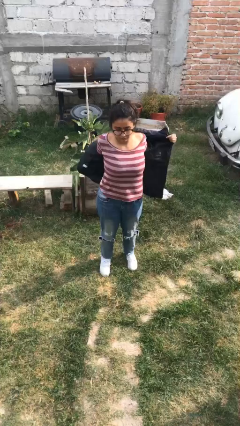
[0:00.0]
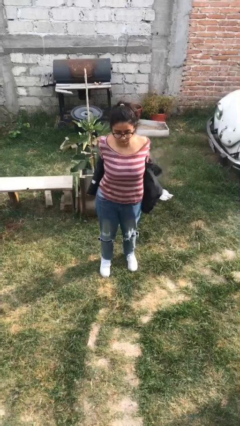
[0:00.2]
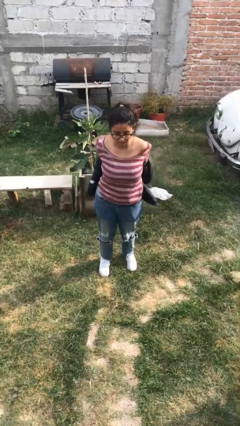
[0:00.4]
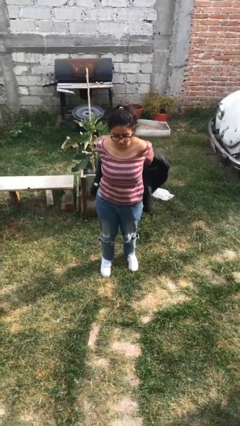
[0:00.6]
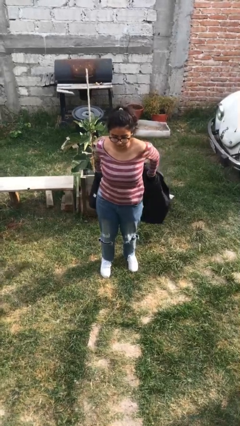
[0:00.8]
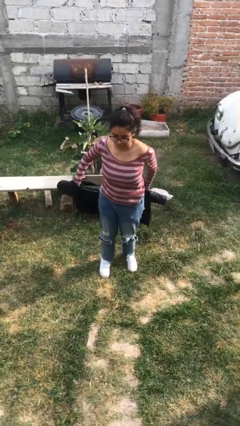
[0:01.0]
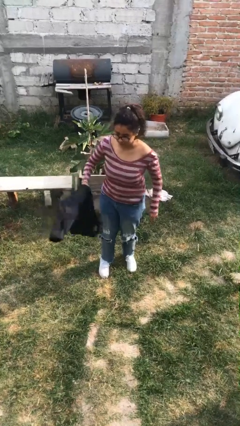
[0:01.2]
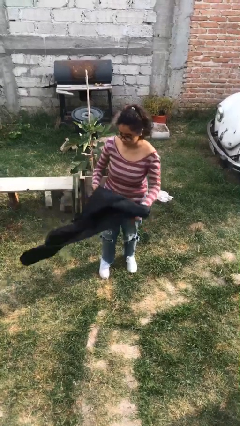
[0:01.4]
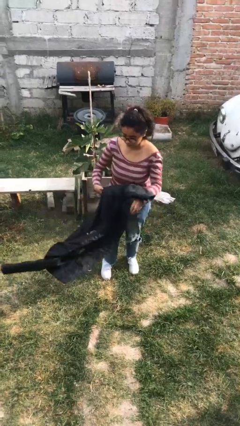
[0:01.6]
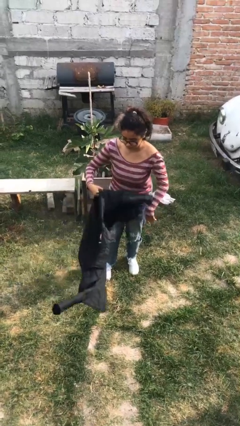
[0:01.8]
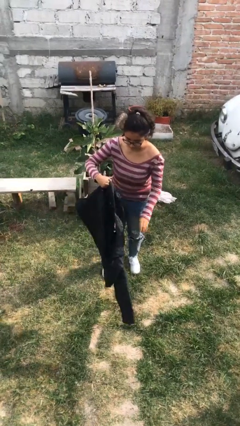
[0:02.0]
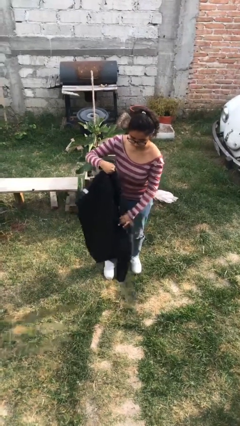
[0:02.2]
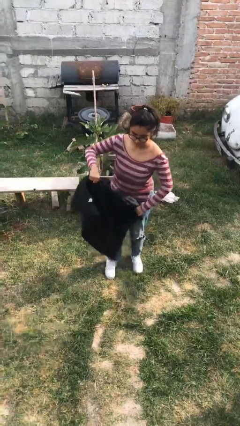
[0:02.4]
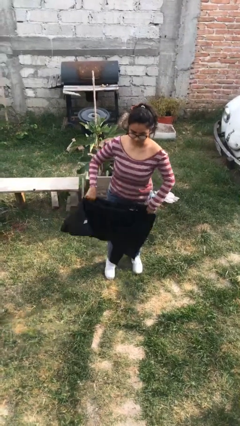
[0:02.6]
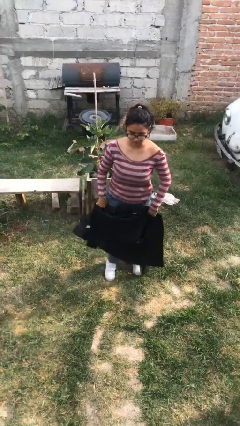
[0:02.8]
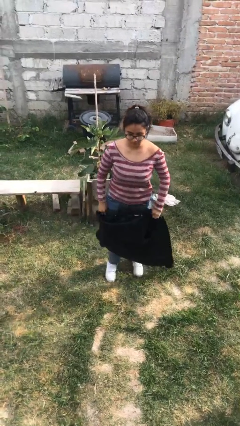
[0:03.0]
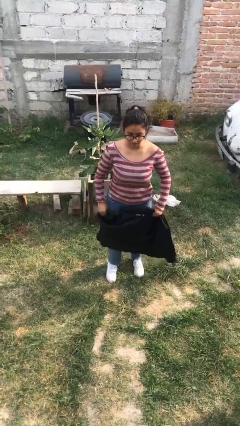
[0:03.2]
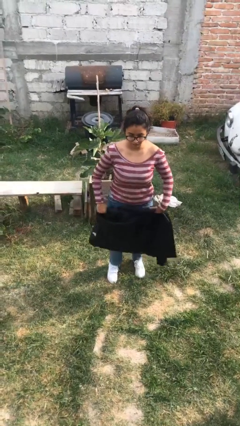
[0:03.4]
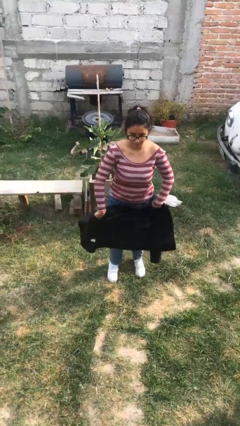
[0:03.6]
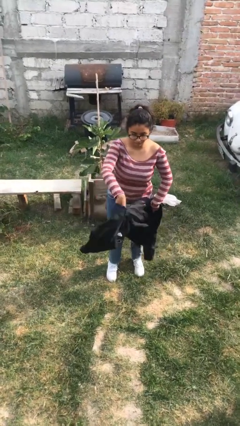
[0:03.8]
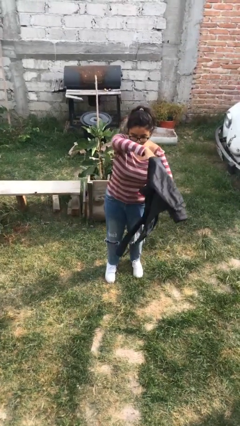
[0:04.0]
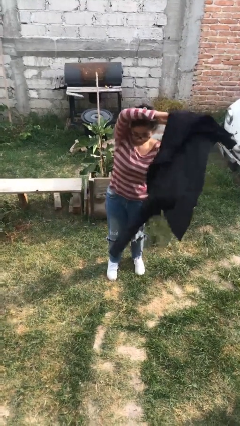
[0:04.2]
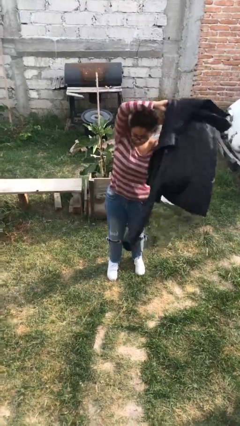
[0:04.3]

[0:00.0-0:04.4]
person takes off jacket

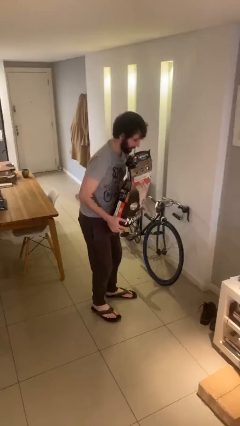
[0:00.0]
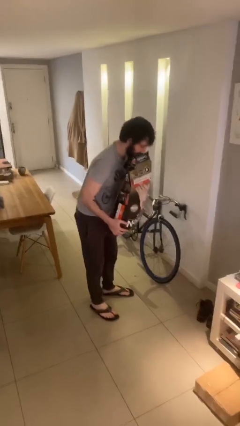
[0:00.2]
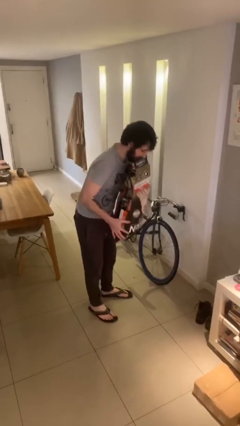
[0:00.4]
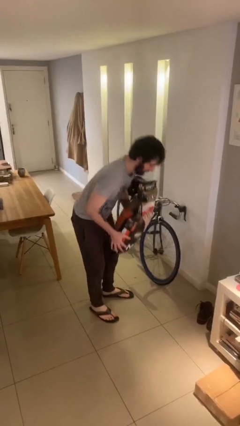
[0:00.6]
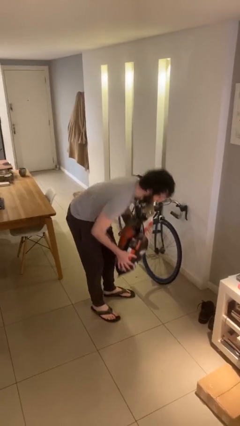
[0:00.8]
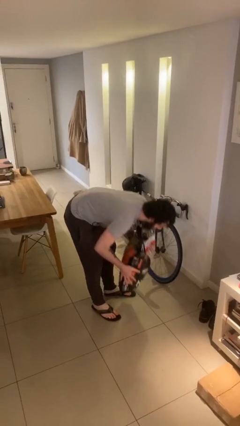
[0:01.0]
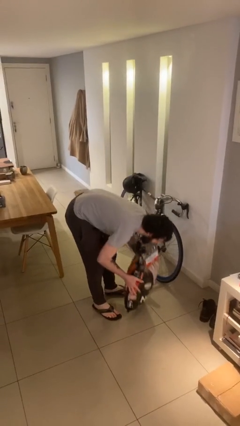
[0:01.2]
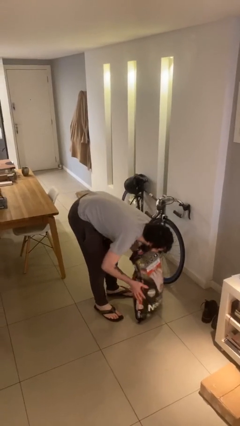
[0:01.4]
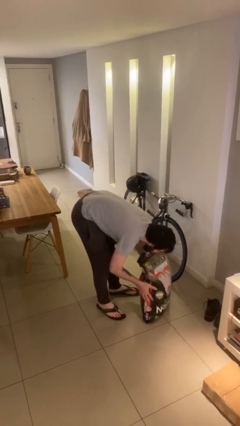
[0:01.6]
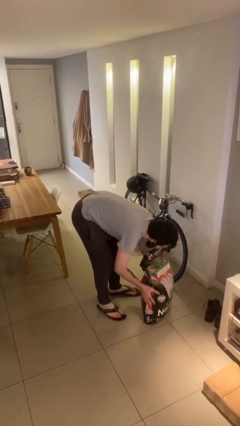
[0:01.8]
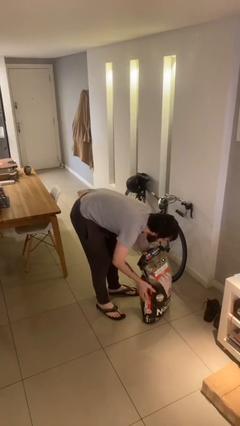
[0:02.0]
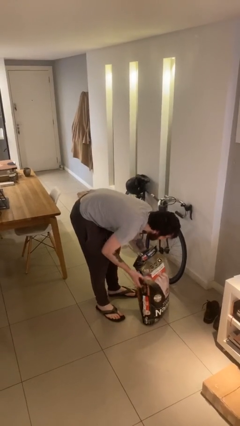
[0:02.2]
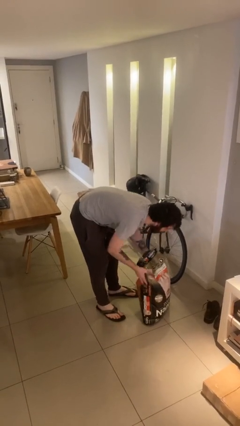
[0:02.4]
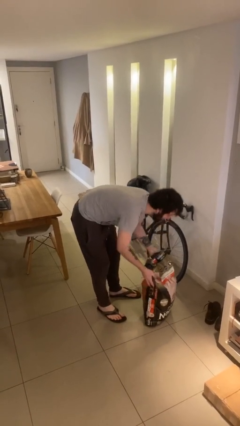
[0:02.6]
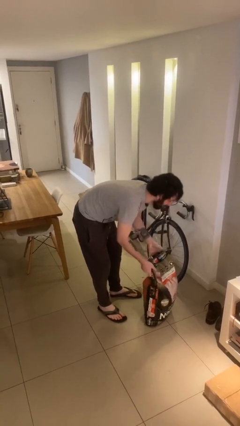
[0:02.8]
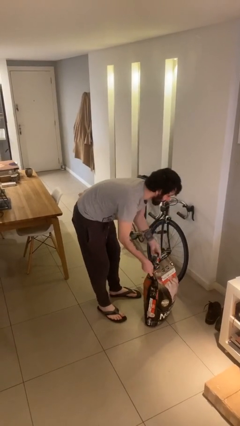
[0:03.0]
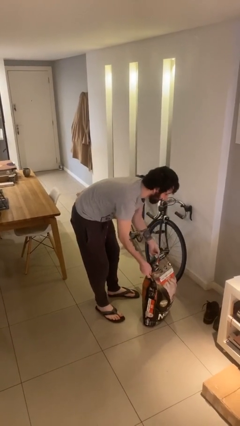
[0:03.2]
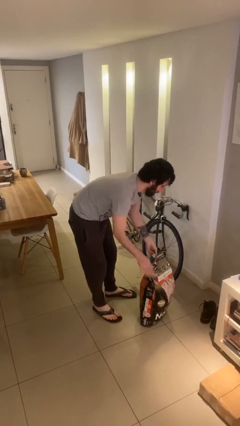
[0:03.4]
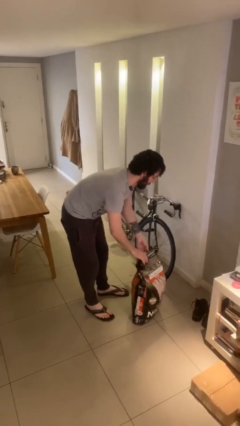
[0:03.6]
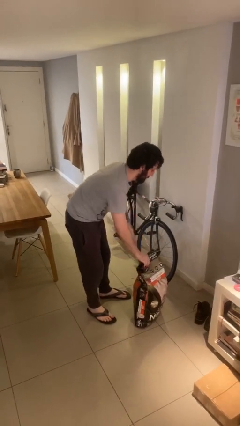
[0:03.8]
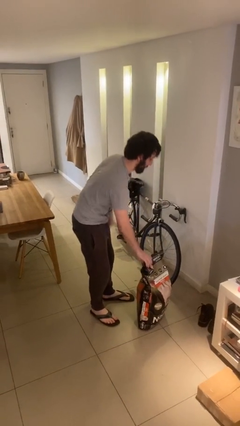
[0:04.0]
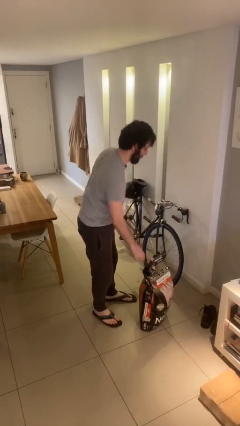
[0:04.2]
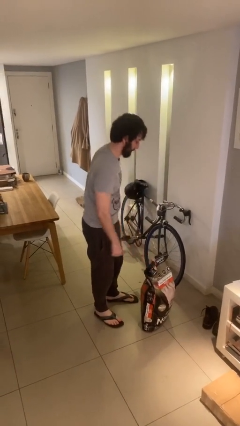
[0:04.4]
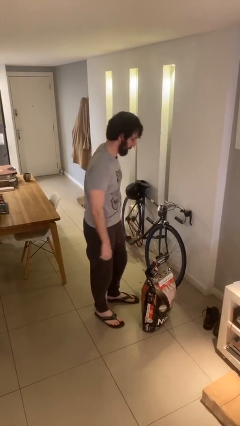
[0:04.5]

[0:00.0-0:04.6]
person puts down object on floor

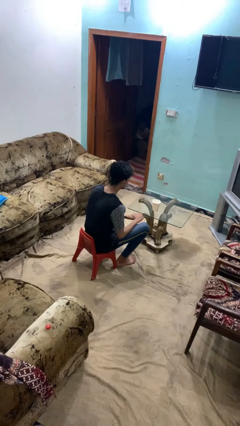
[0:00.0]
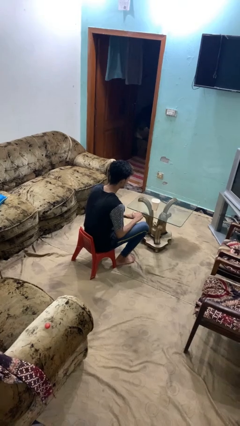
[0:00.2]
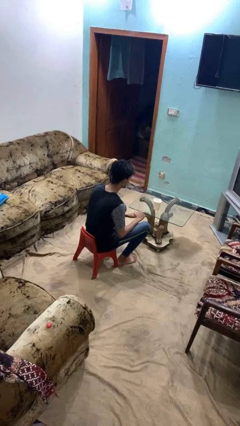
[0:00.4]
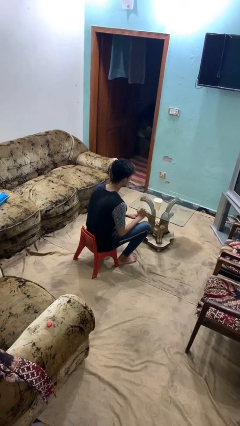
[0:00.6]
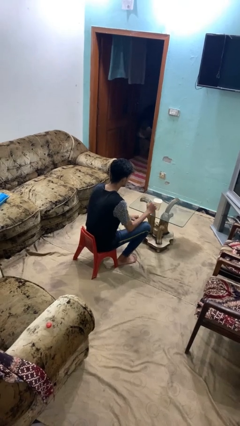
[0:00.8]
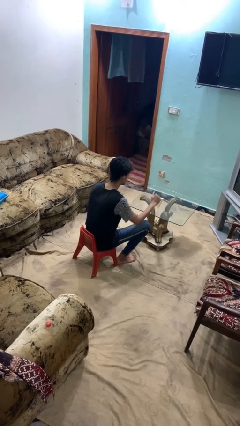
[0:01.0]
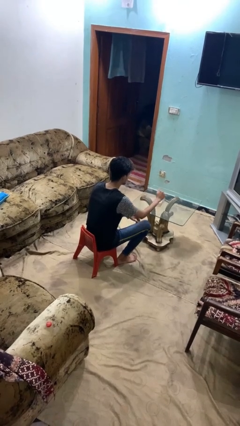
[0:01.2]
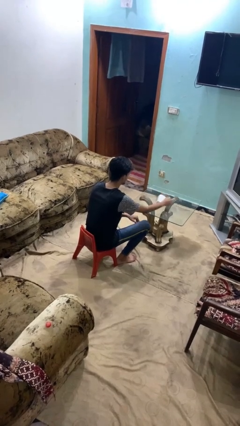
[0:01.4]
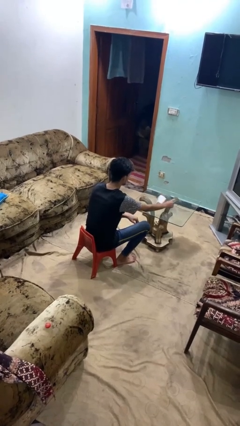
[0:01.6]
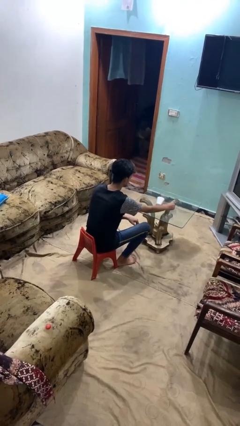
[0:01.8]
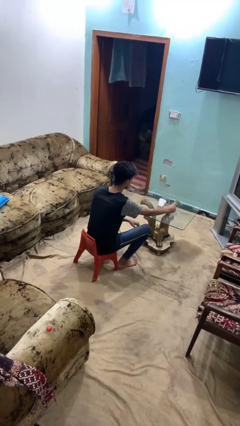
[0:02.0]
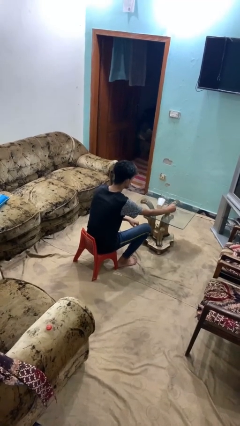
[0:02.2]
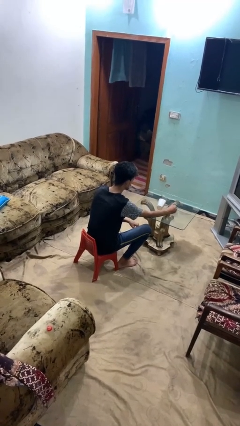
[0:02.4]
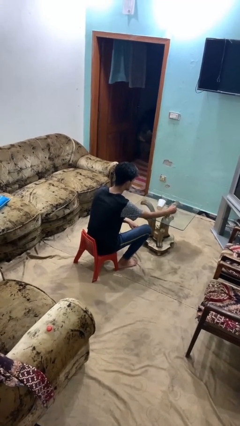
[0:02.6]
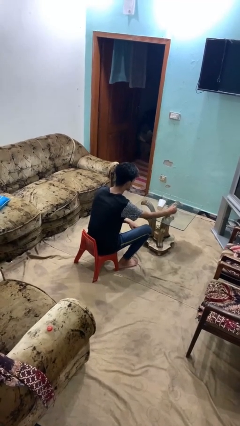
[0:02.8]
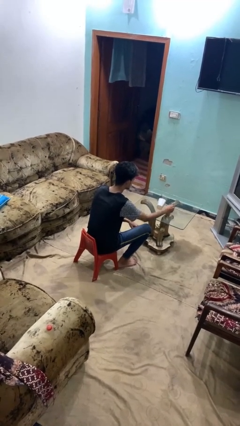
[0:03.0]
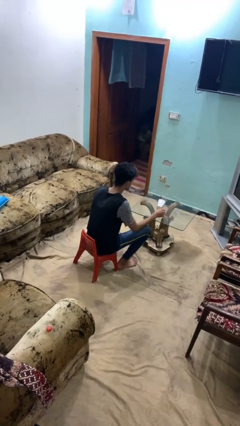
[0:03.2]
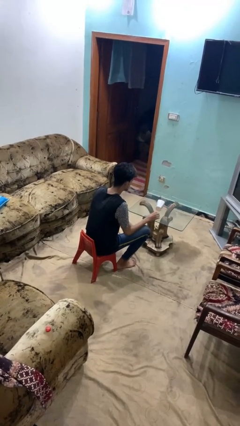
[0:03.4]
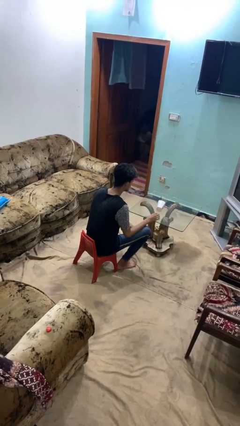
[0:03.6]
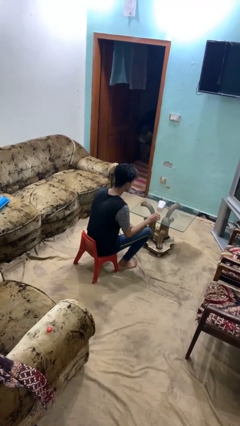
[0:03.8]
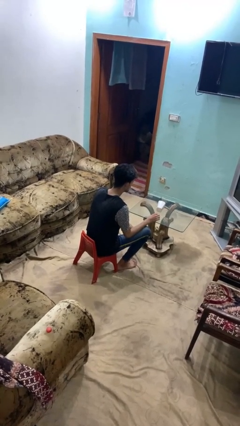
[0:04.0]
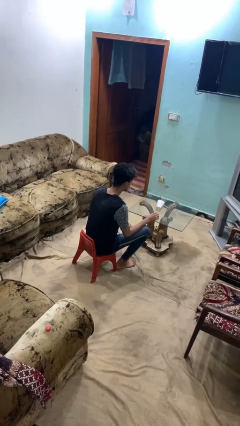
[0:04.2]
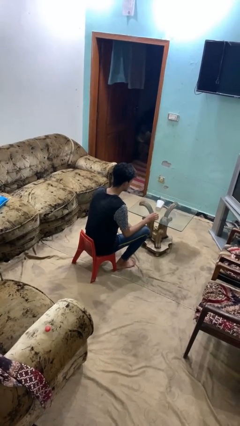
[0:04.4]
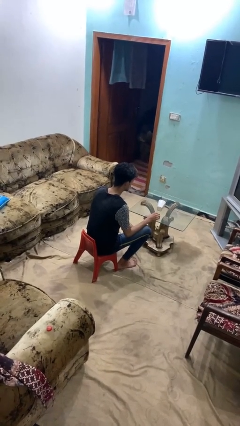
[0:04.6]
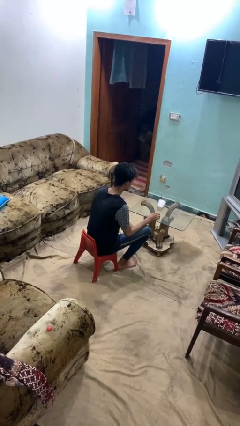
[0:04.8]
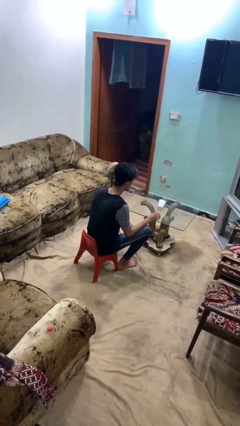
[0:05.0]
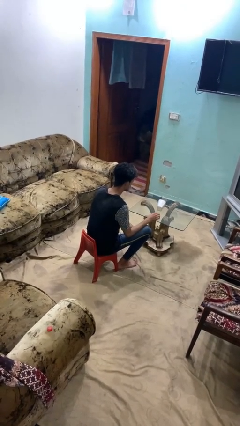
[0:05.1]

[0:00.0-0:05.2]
person spills on table

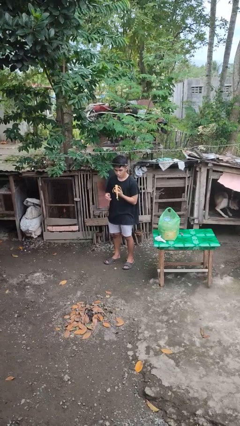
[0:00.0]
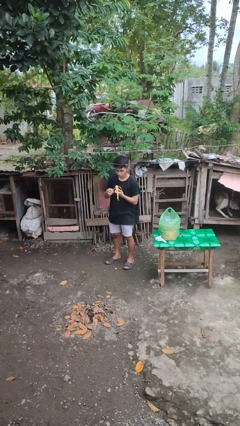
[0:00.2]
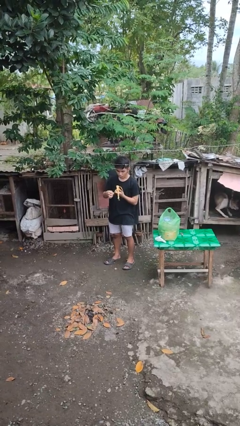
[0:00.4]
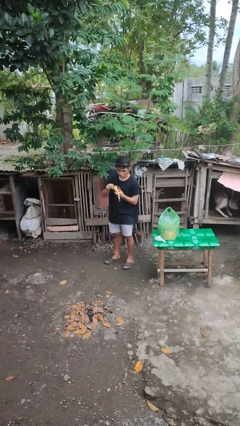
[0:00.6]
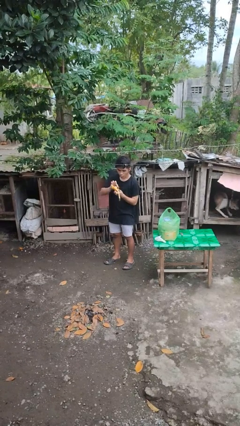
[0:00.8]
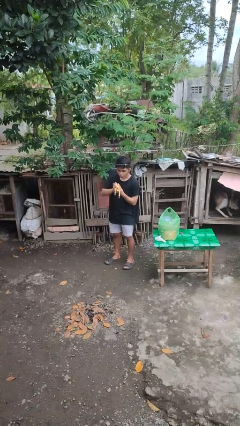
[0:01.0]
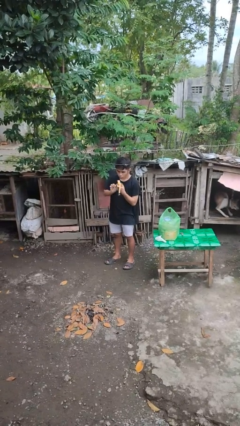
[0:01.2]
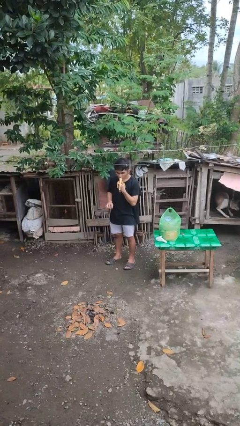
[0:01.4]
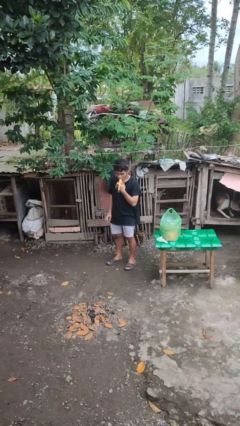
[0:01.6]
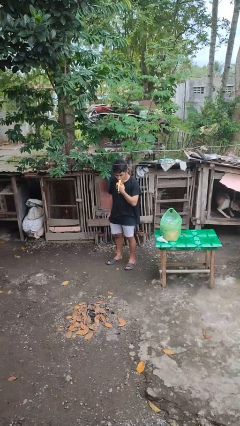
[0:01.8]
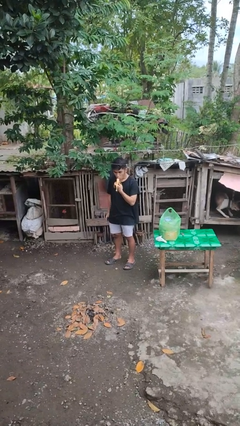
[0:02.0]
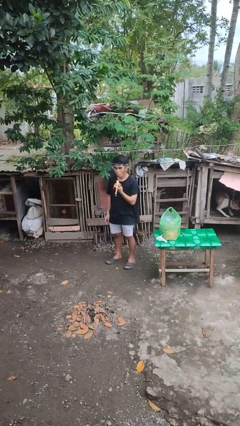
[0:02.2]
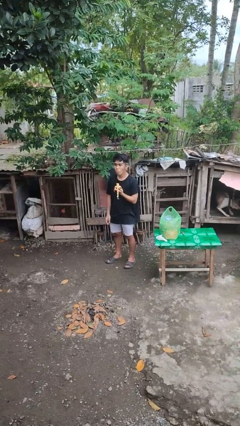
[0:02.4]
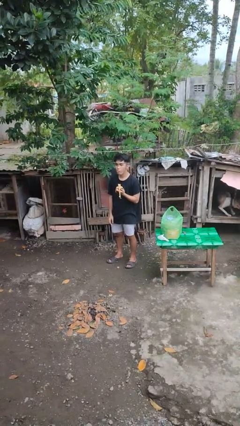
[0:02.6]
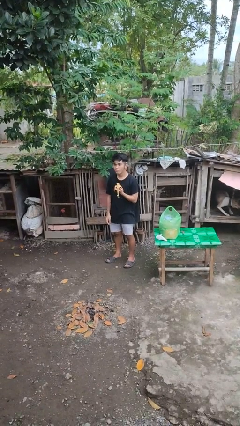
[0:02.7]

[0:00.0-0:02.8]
person eats banana

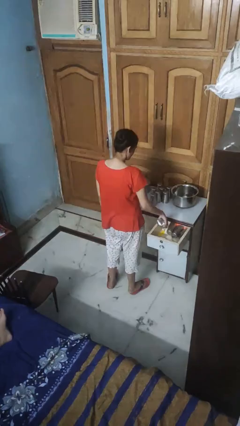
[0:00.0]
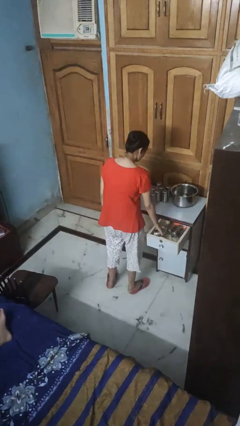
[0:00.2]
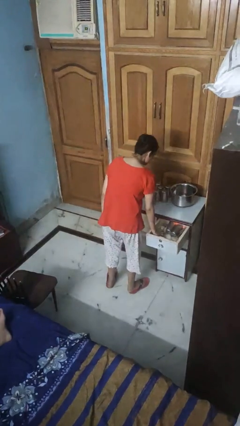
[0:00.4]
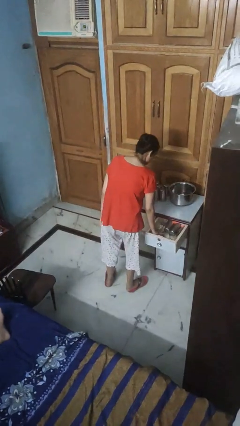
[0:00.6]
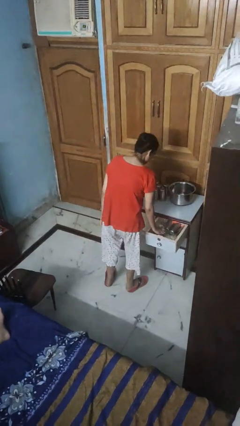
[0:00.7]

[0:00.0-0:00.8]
person puts object into kitchen drawer
